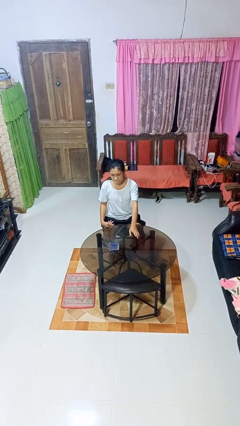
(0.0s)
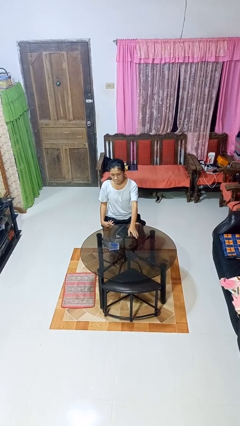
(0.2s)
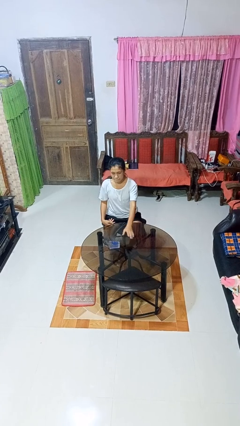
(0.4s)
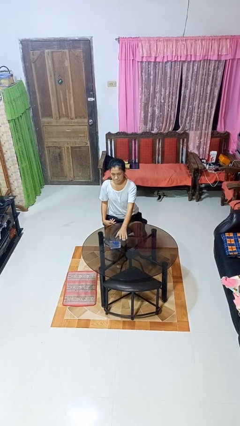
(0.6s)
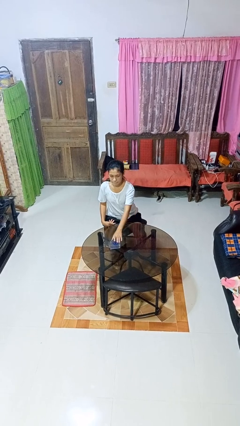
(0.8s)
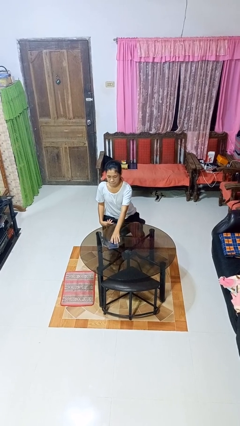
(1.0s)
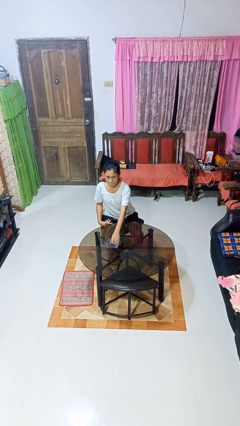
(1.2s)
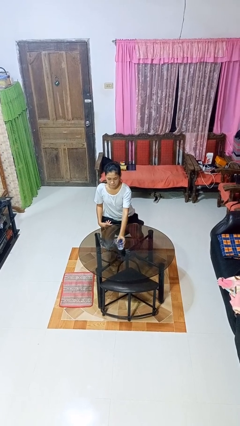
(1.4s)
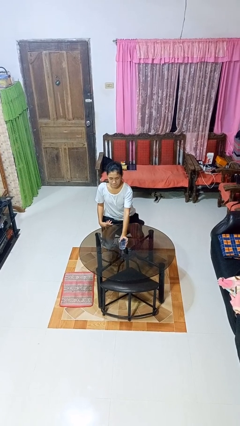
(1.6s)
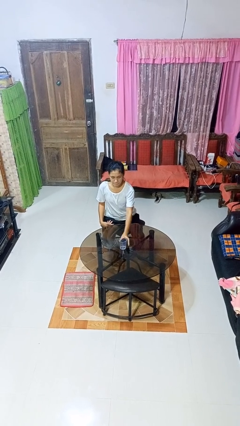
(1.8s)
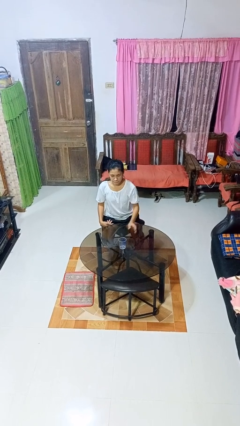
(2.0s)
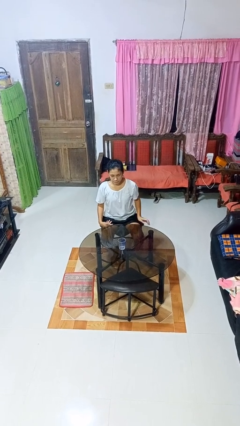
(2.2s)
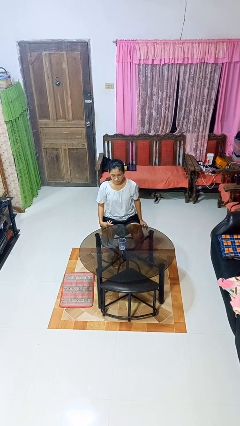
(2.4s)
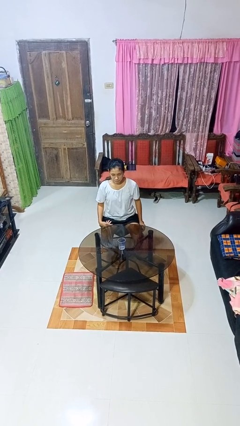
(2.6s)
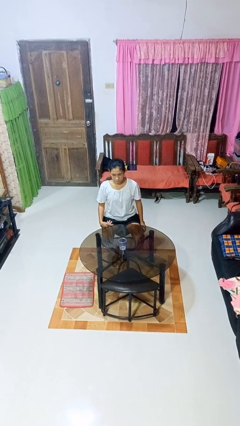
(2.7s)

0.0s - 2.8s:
person sets upright glass

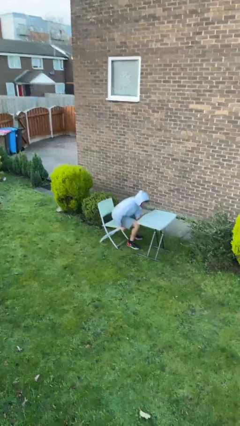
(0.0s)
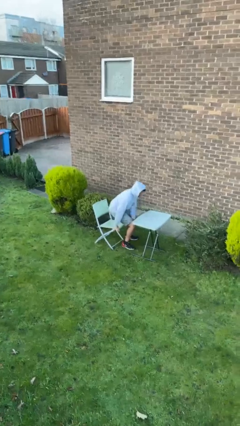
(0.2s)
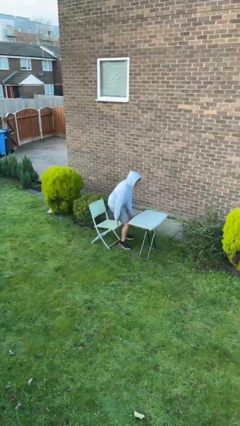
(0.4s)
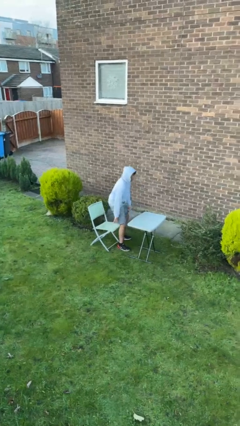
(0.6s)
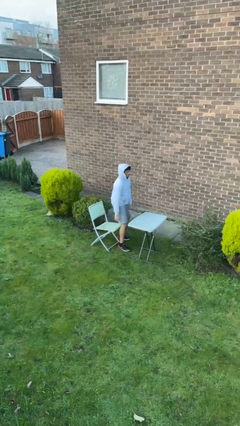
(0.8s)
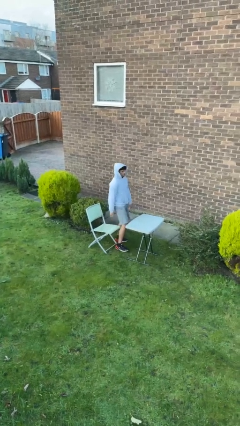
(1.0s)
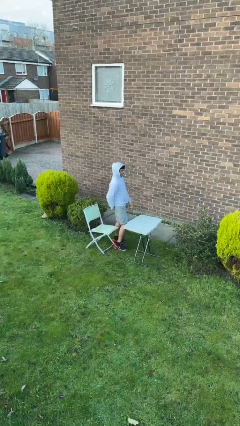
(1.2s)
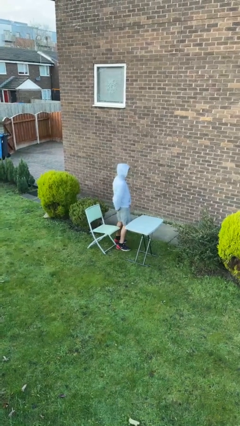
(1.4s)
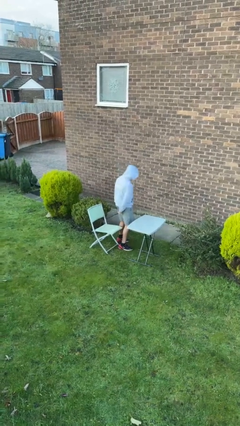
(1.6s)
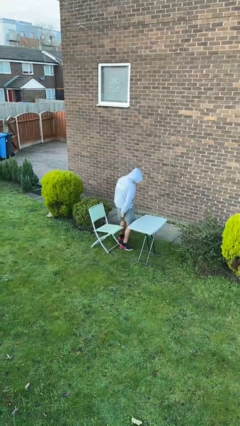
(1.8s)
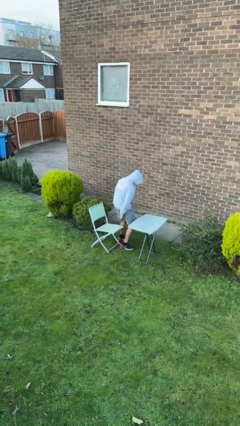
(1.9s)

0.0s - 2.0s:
person stands up

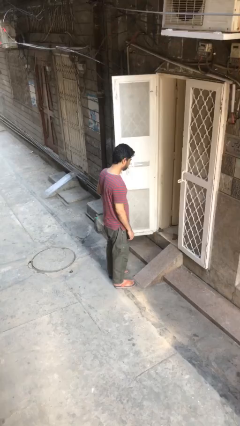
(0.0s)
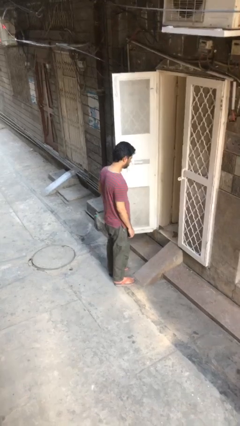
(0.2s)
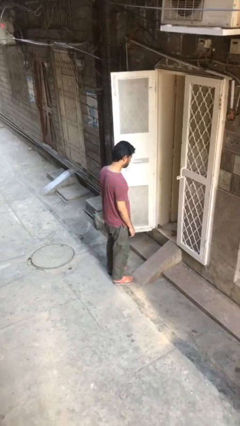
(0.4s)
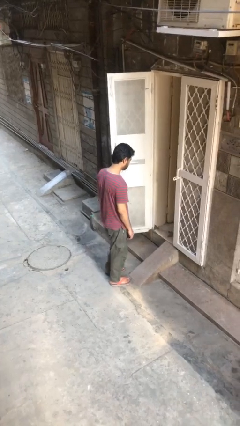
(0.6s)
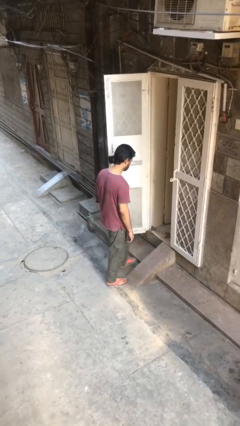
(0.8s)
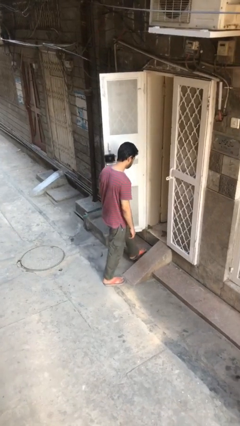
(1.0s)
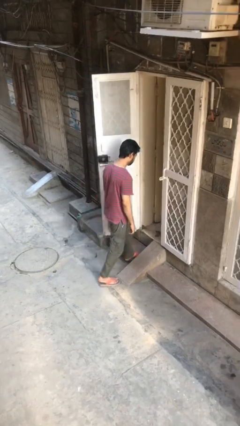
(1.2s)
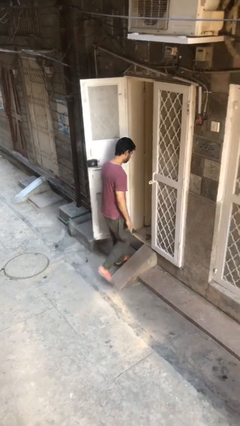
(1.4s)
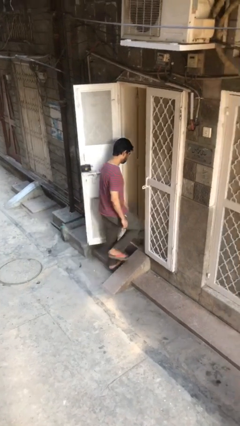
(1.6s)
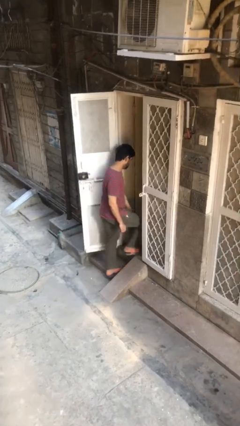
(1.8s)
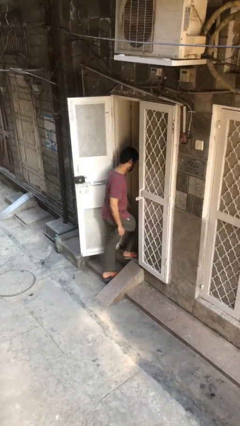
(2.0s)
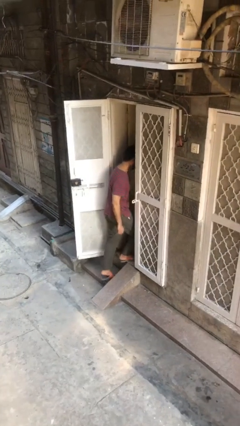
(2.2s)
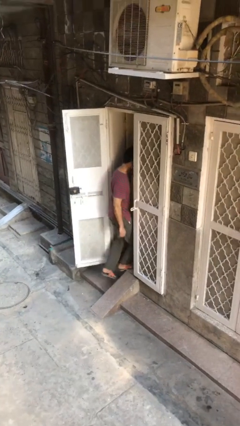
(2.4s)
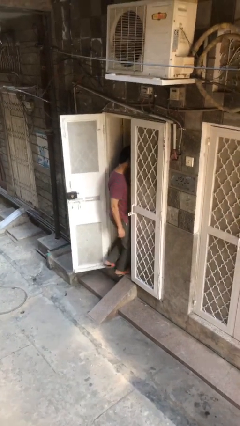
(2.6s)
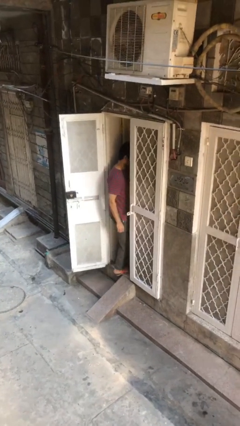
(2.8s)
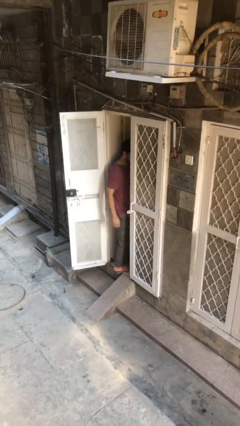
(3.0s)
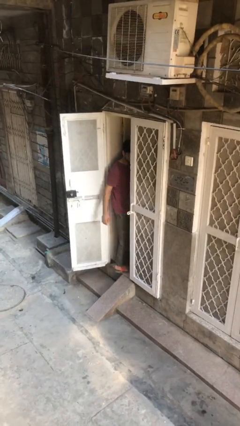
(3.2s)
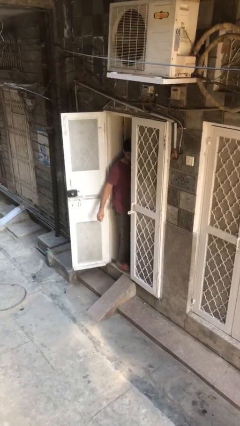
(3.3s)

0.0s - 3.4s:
person exits scene through structure

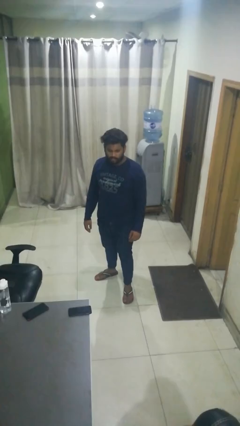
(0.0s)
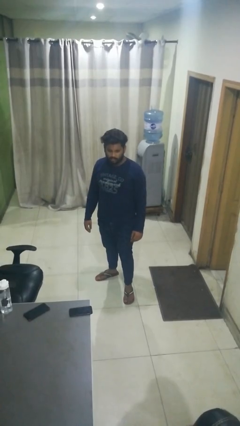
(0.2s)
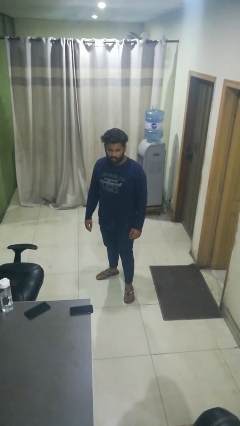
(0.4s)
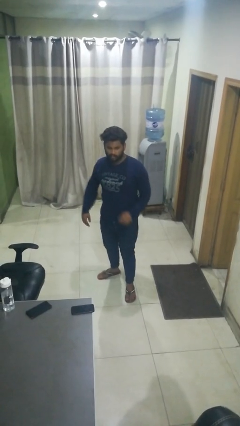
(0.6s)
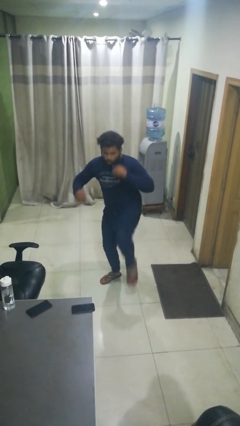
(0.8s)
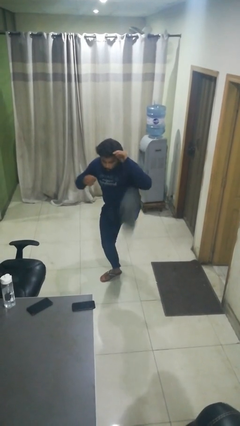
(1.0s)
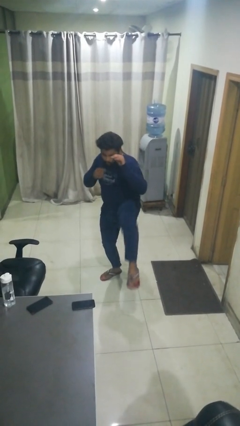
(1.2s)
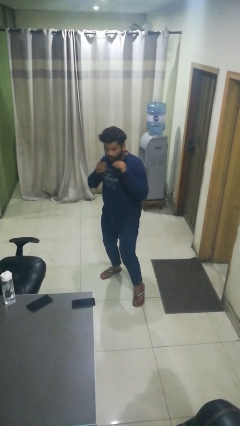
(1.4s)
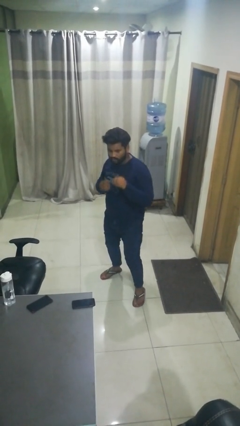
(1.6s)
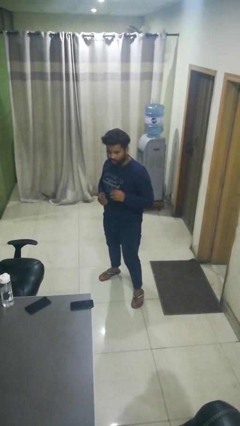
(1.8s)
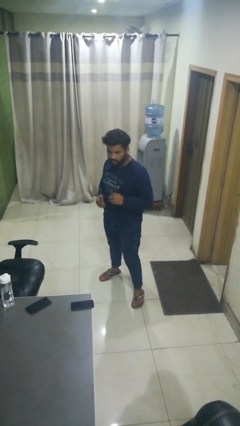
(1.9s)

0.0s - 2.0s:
person karate kicks

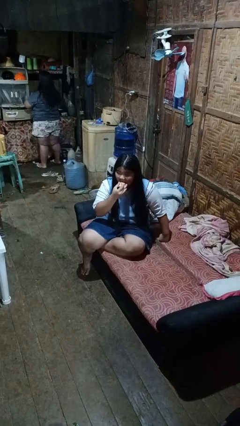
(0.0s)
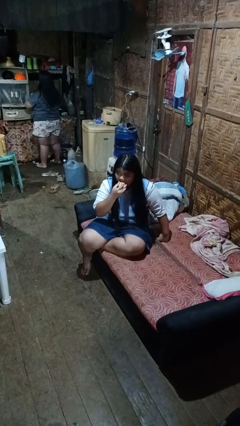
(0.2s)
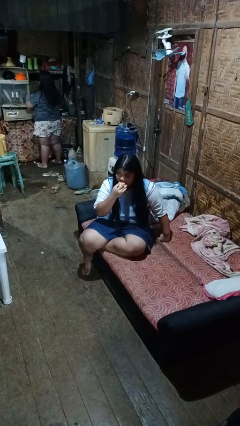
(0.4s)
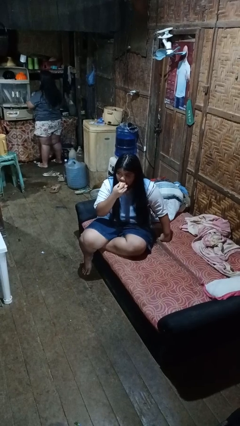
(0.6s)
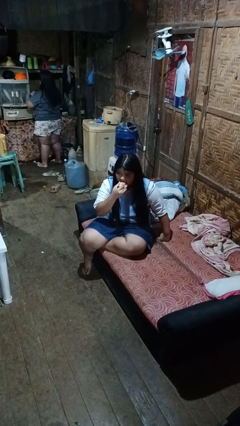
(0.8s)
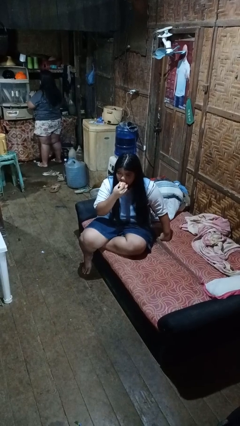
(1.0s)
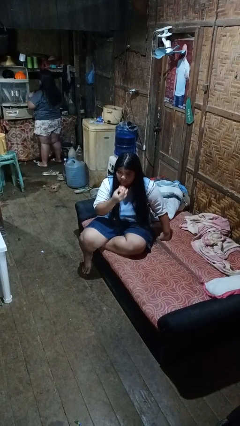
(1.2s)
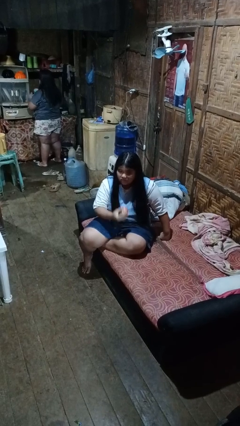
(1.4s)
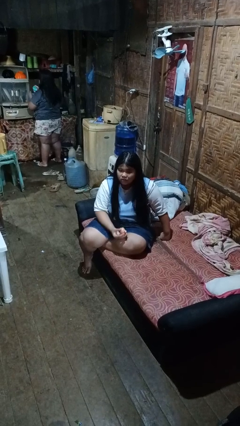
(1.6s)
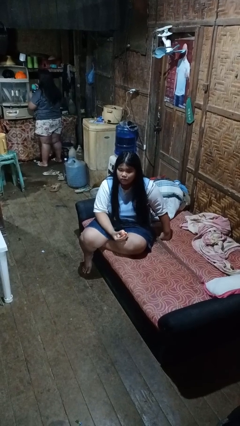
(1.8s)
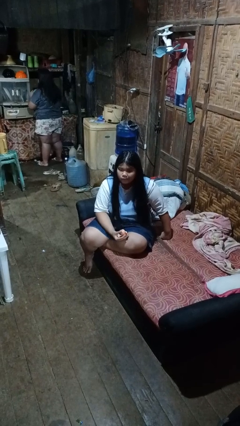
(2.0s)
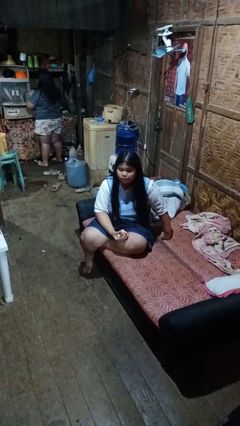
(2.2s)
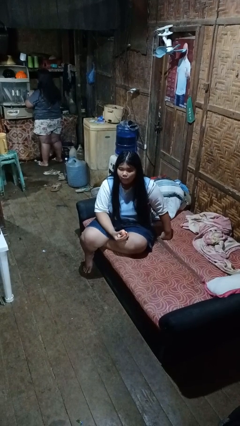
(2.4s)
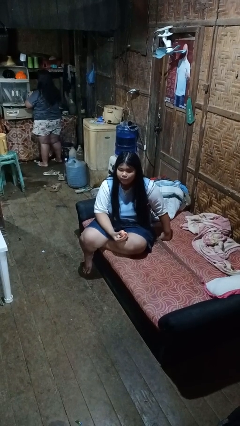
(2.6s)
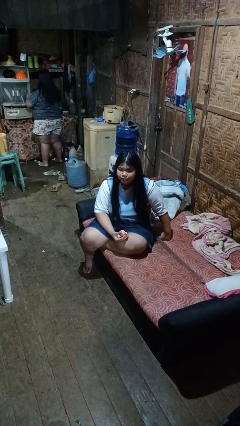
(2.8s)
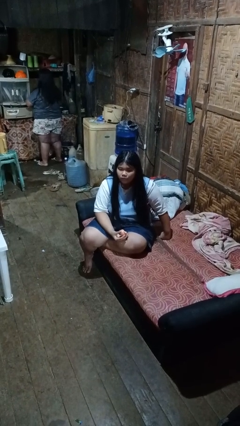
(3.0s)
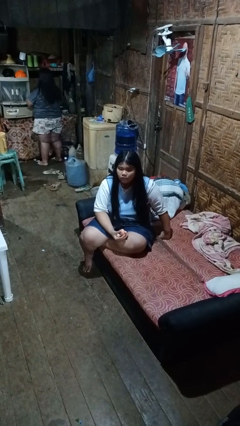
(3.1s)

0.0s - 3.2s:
person eats apple

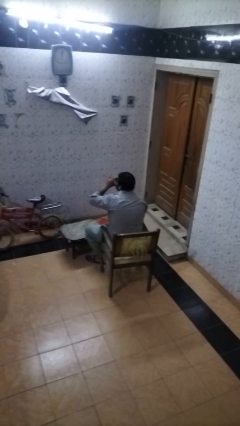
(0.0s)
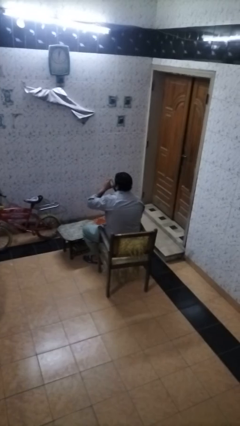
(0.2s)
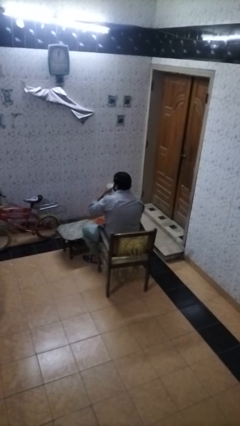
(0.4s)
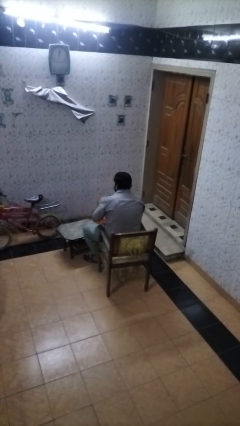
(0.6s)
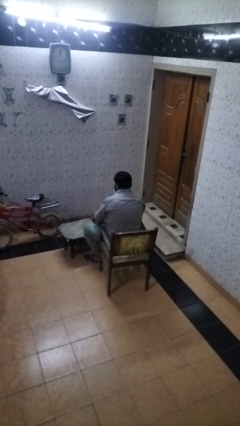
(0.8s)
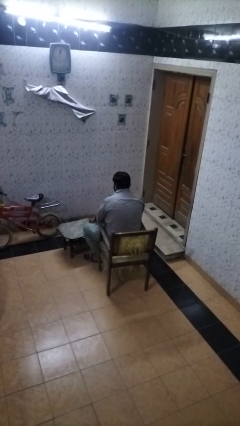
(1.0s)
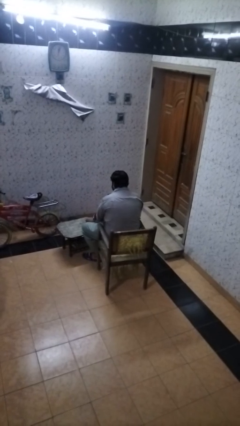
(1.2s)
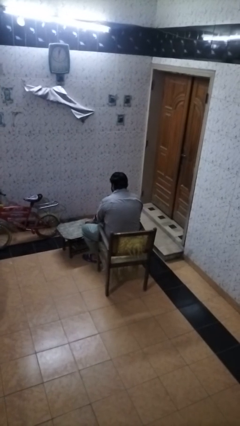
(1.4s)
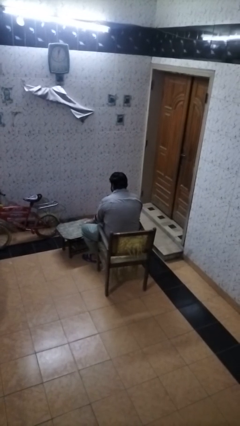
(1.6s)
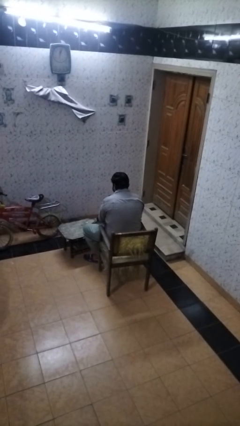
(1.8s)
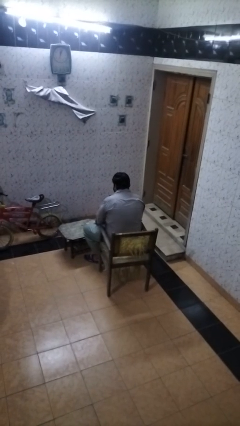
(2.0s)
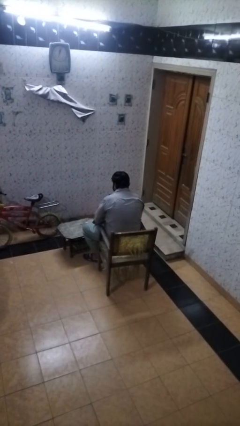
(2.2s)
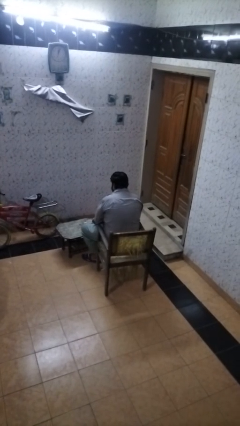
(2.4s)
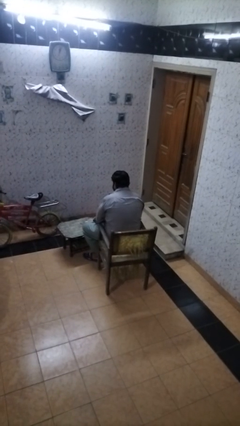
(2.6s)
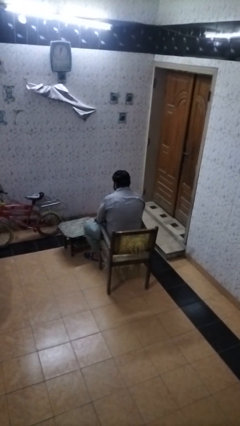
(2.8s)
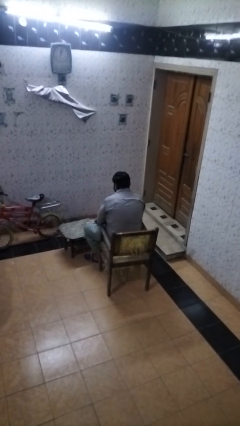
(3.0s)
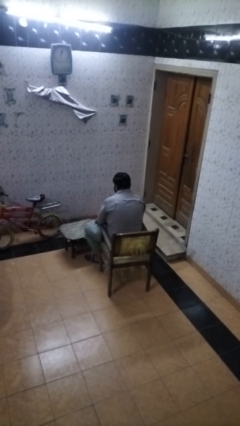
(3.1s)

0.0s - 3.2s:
person puts down object on table

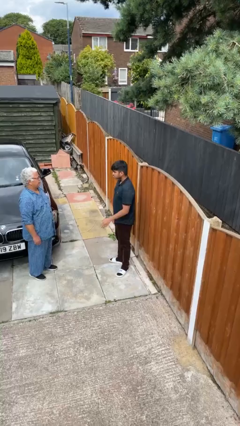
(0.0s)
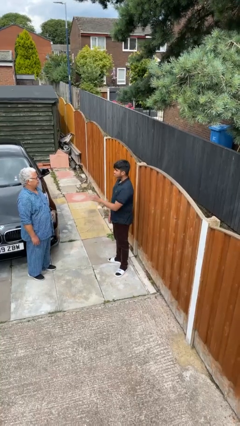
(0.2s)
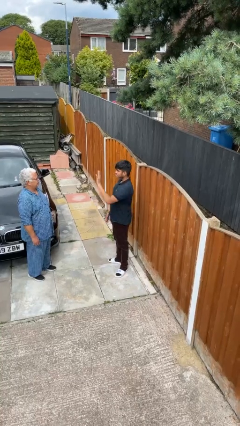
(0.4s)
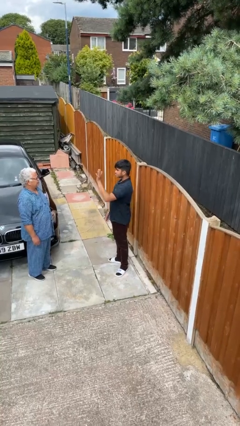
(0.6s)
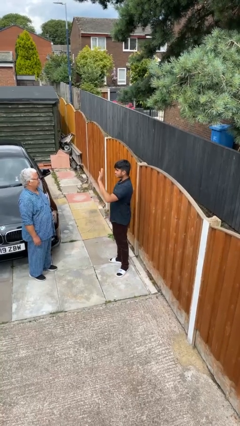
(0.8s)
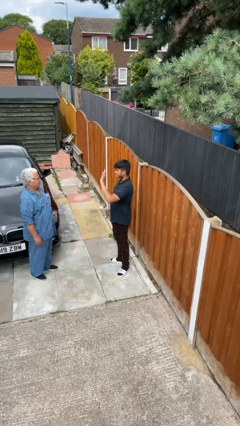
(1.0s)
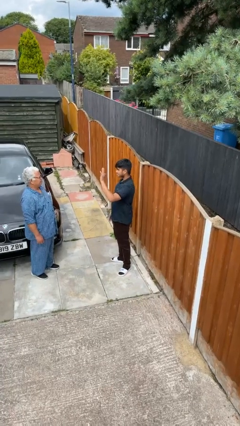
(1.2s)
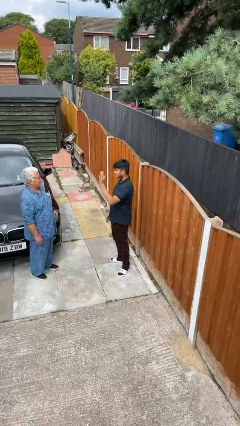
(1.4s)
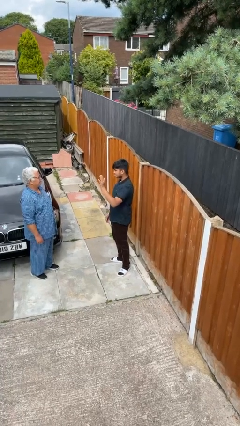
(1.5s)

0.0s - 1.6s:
person waves at person
